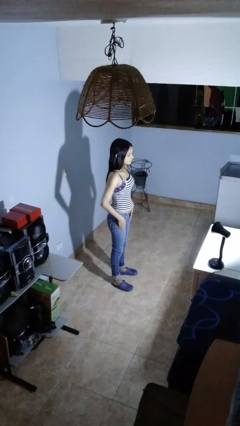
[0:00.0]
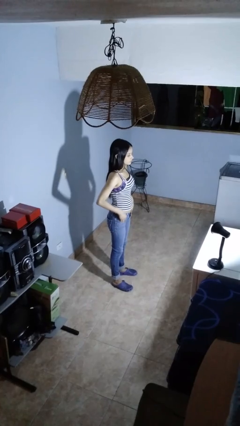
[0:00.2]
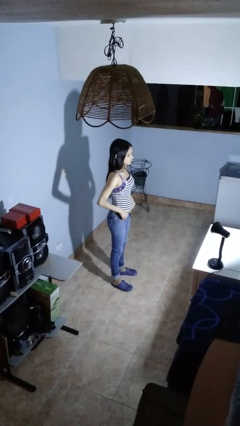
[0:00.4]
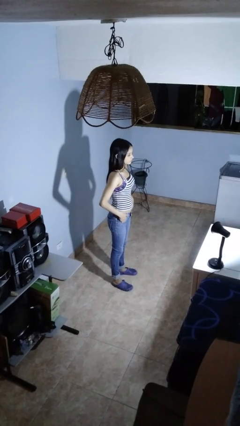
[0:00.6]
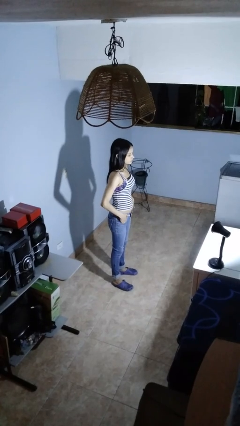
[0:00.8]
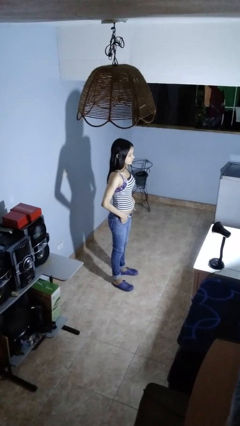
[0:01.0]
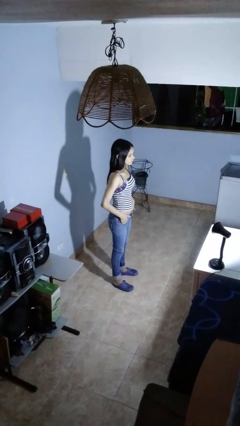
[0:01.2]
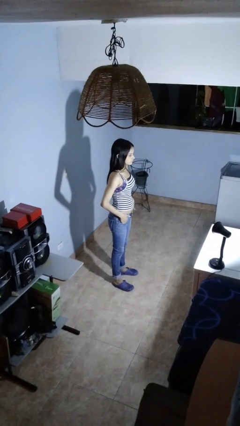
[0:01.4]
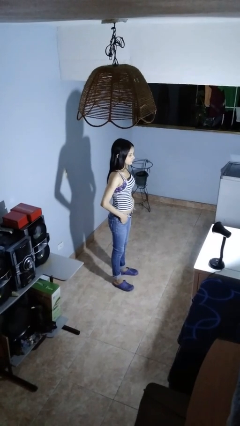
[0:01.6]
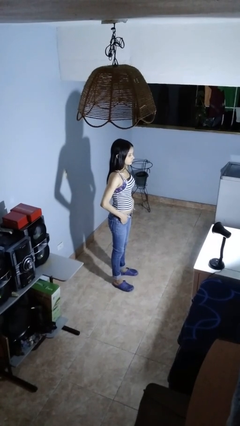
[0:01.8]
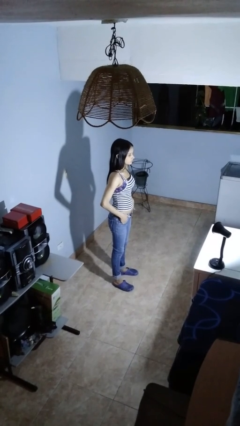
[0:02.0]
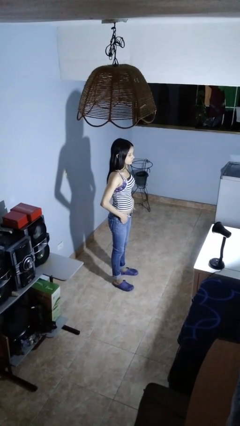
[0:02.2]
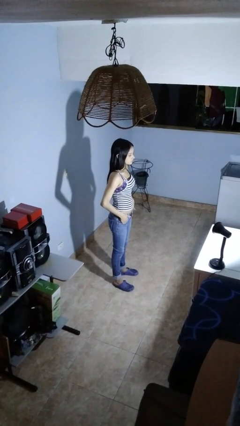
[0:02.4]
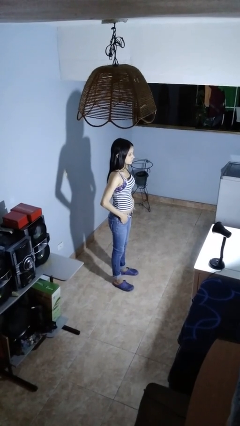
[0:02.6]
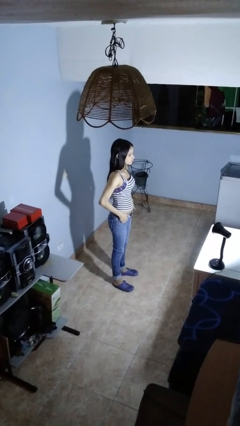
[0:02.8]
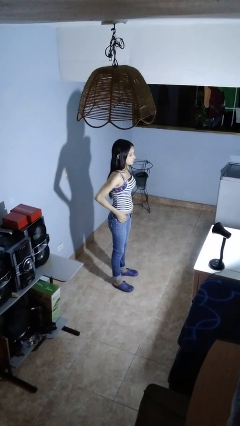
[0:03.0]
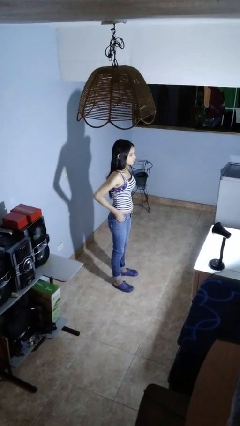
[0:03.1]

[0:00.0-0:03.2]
person puts hands in back pockets

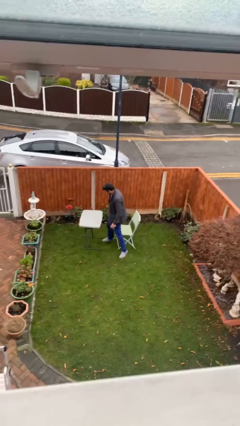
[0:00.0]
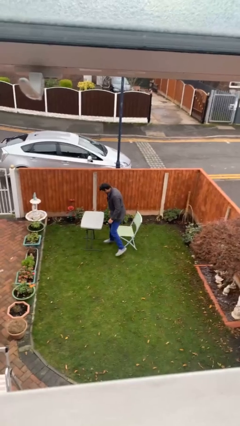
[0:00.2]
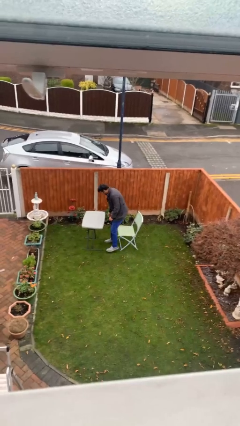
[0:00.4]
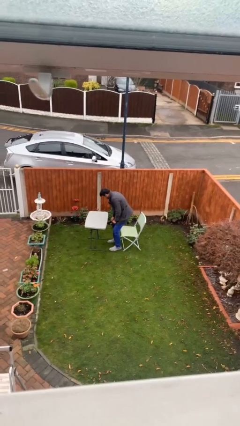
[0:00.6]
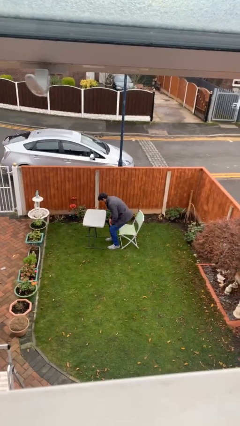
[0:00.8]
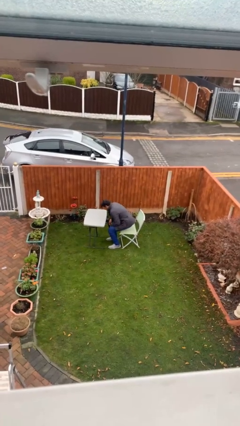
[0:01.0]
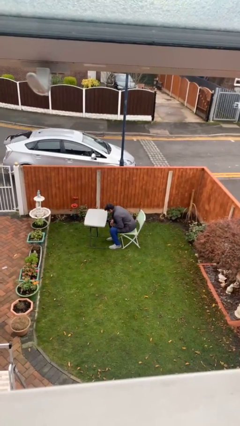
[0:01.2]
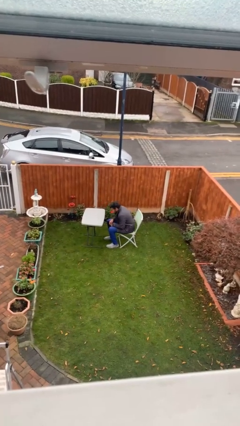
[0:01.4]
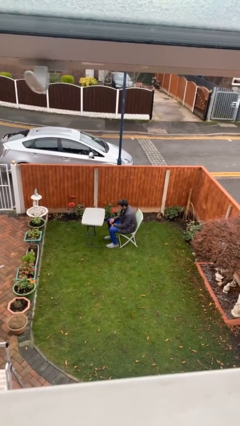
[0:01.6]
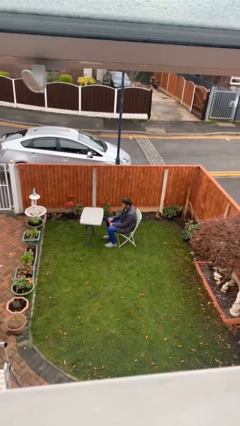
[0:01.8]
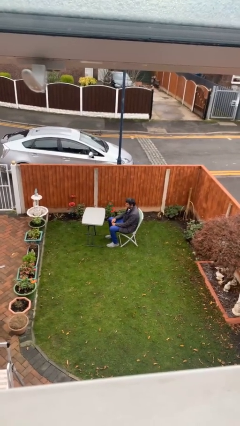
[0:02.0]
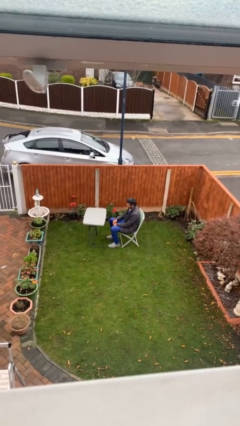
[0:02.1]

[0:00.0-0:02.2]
person sits down

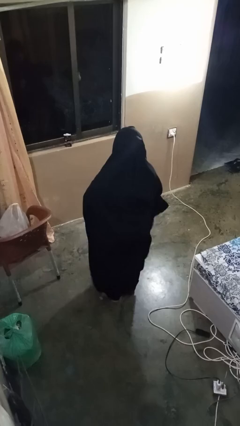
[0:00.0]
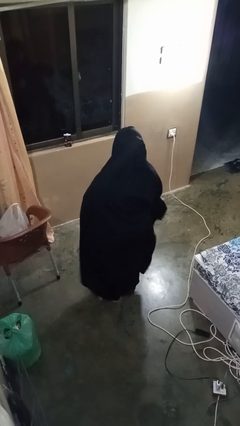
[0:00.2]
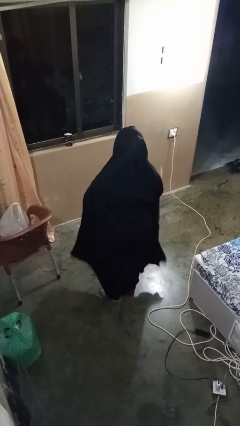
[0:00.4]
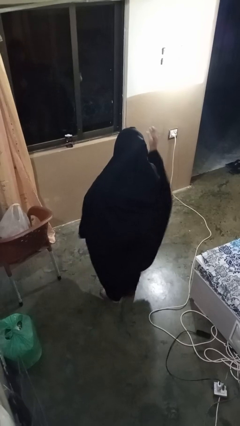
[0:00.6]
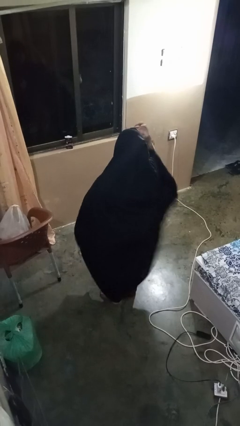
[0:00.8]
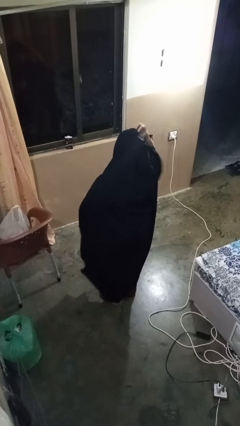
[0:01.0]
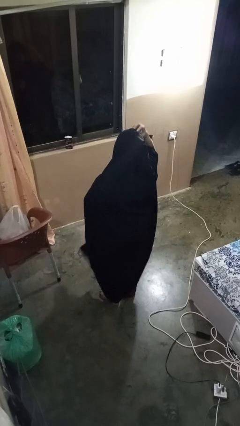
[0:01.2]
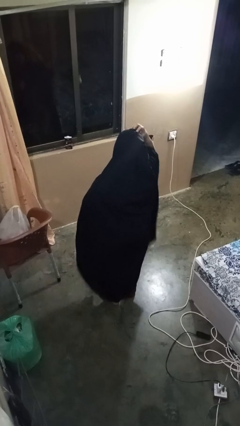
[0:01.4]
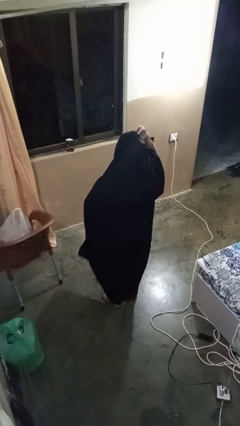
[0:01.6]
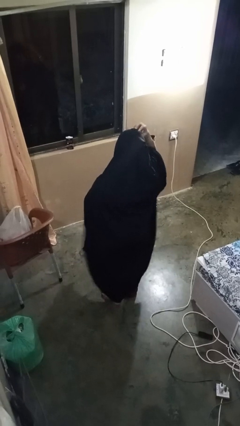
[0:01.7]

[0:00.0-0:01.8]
person scratches face

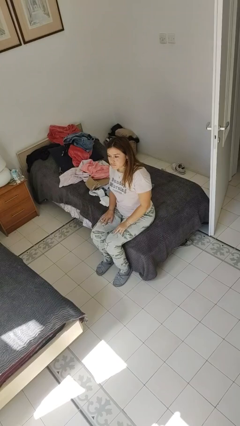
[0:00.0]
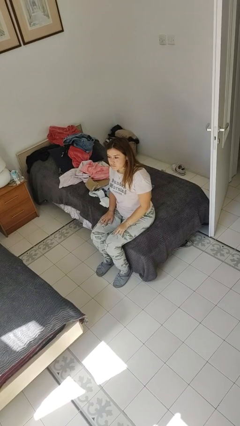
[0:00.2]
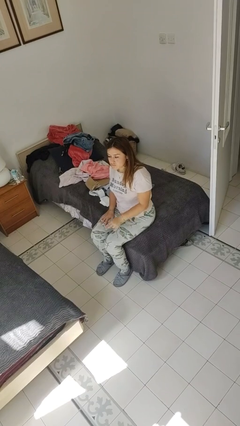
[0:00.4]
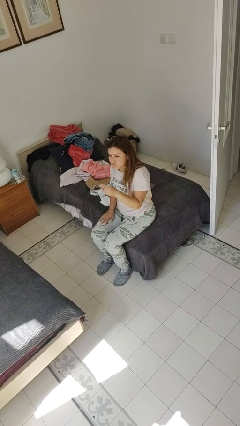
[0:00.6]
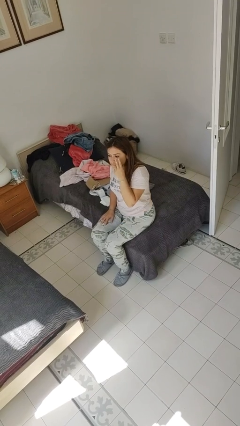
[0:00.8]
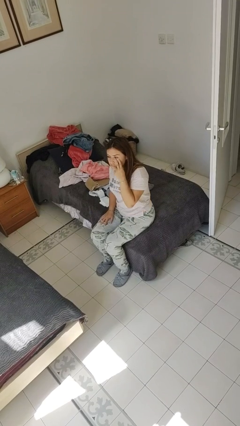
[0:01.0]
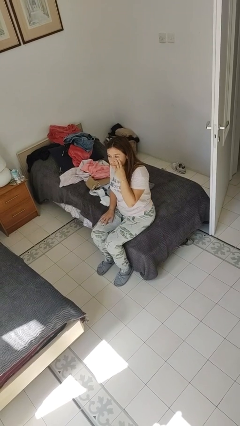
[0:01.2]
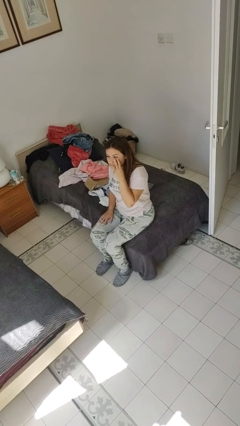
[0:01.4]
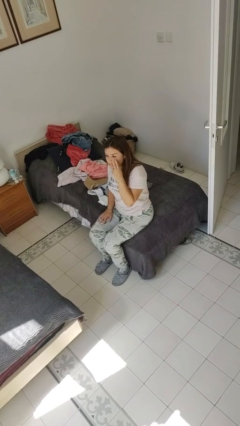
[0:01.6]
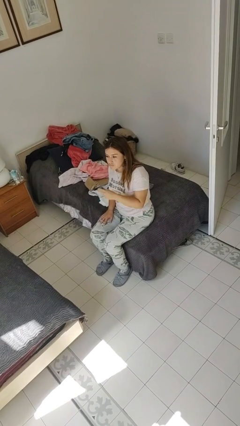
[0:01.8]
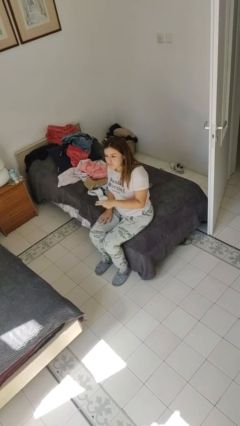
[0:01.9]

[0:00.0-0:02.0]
person gestures watch closely

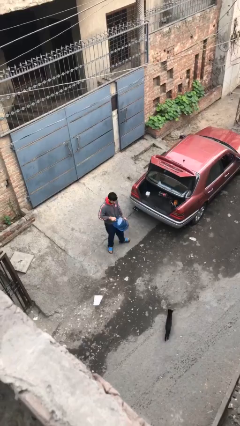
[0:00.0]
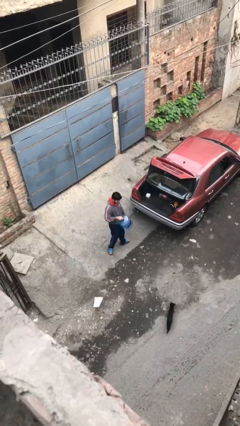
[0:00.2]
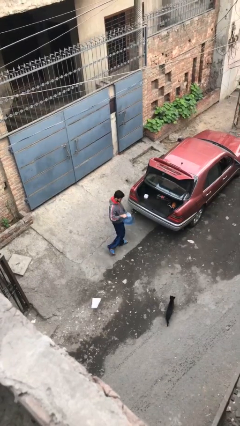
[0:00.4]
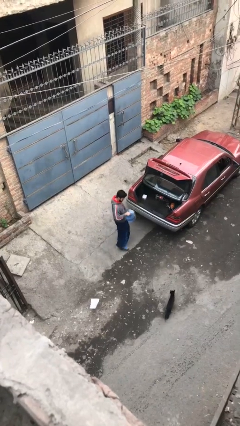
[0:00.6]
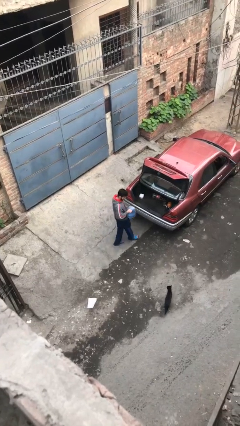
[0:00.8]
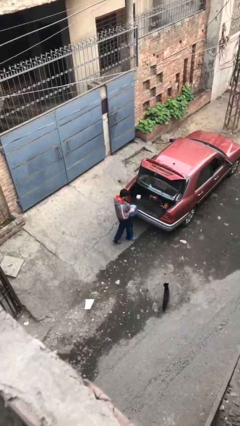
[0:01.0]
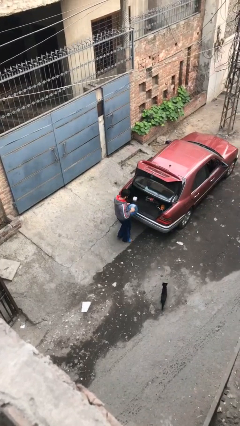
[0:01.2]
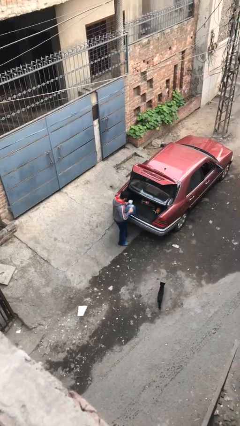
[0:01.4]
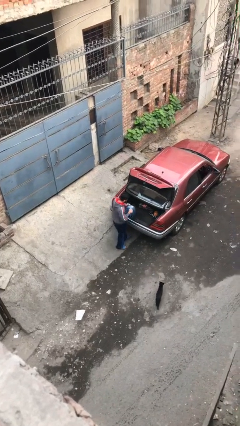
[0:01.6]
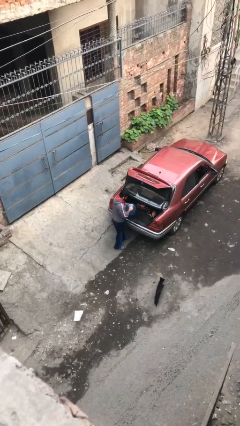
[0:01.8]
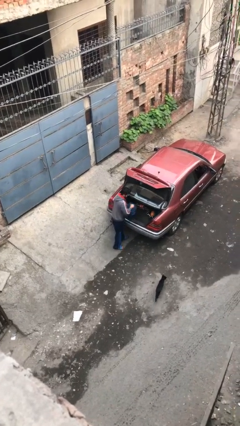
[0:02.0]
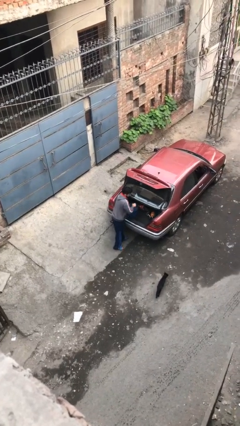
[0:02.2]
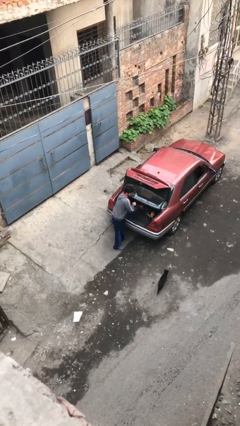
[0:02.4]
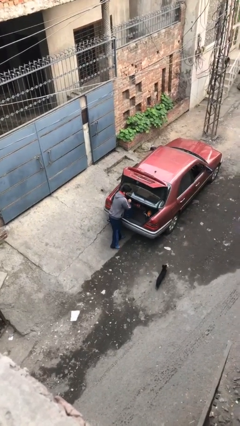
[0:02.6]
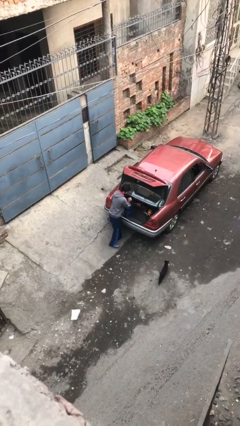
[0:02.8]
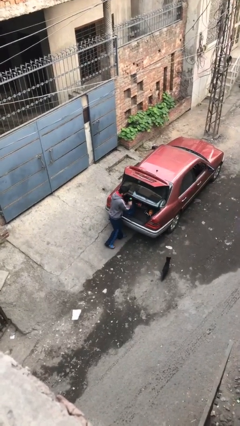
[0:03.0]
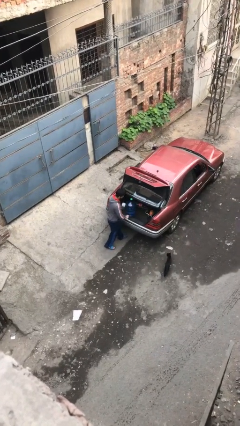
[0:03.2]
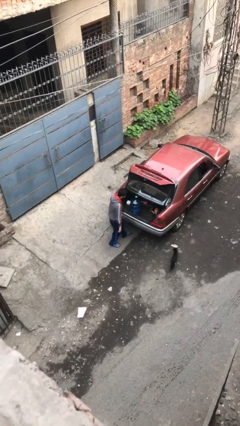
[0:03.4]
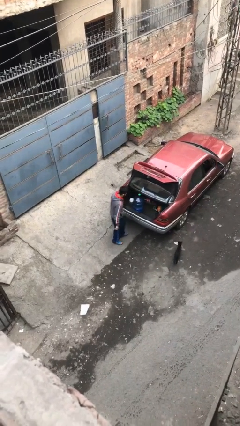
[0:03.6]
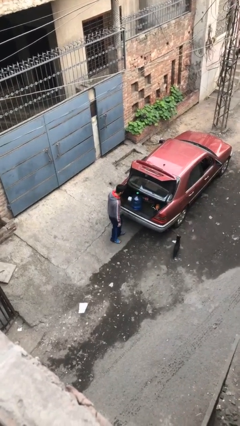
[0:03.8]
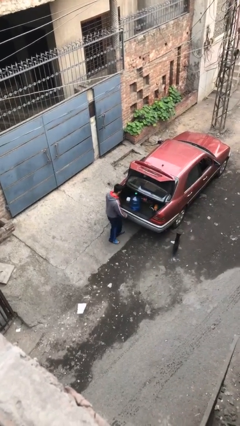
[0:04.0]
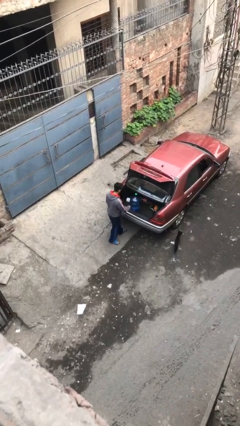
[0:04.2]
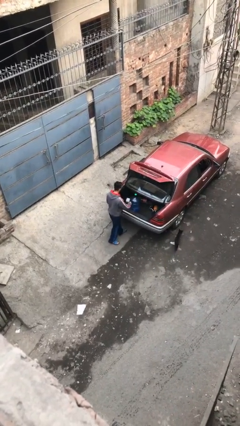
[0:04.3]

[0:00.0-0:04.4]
person loads car

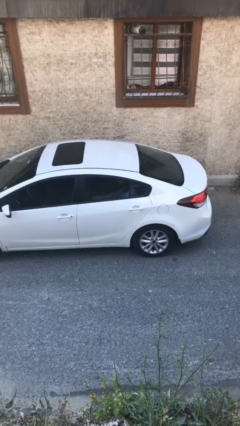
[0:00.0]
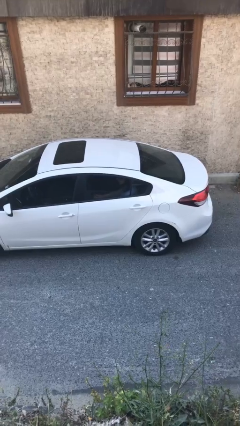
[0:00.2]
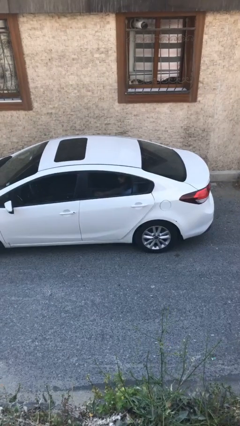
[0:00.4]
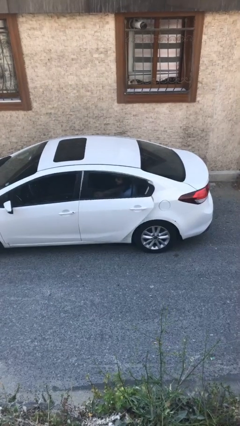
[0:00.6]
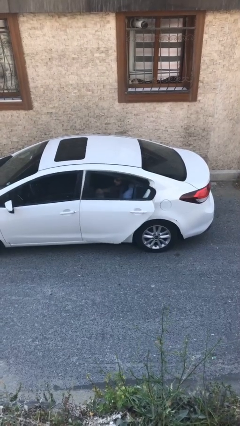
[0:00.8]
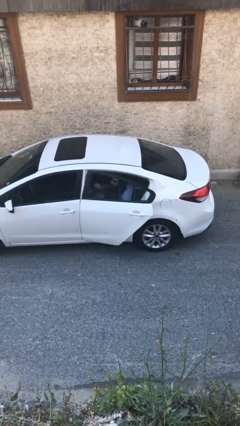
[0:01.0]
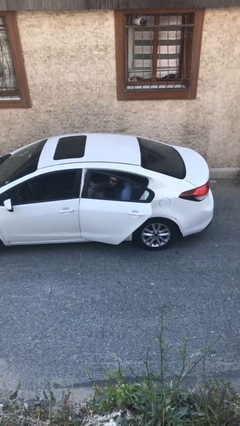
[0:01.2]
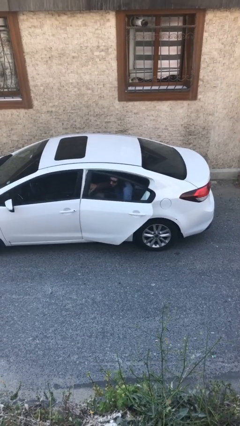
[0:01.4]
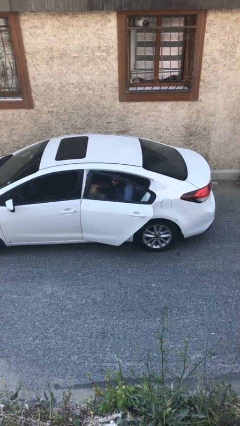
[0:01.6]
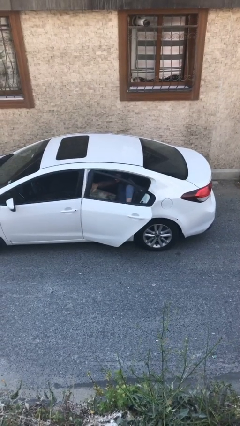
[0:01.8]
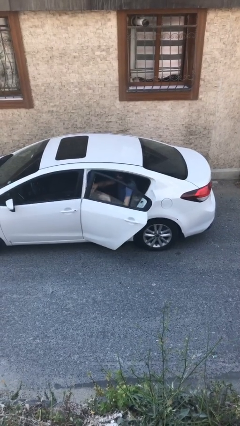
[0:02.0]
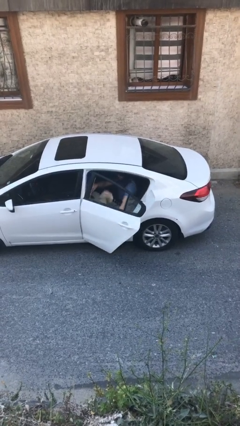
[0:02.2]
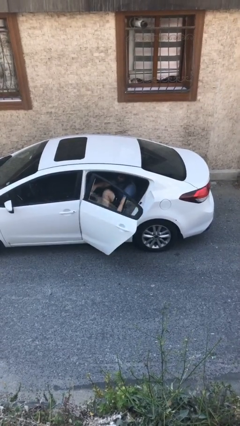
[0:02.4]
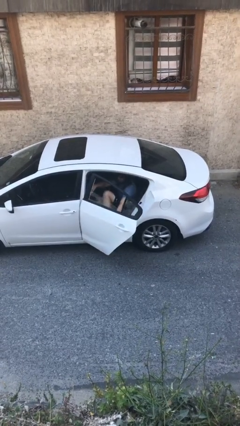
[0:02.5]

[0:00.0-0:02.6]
person opens car door

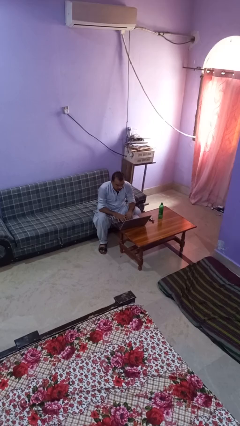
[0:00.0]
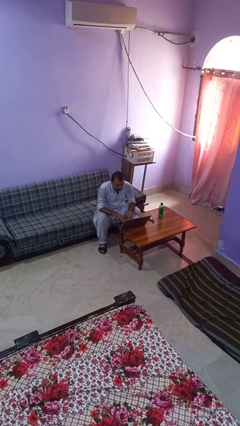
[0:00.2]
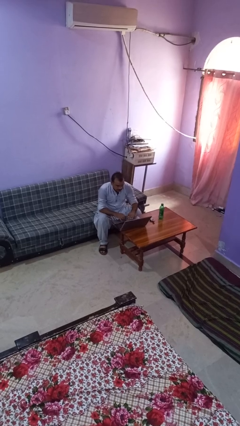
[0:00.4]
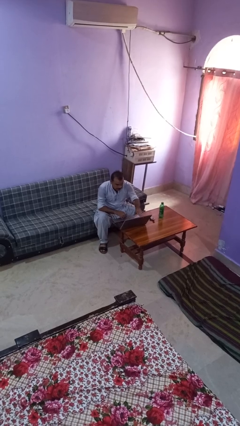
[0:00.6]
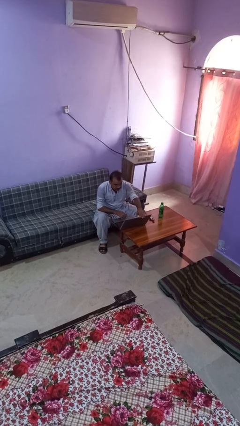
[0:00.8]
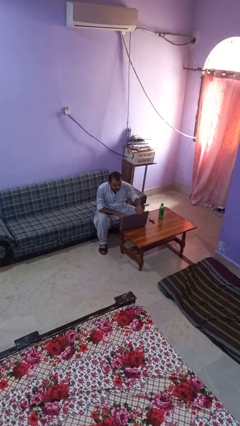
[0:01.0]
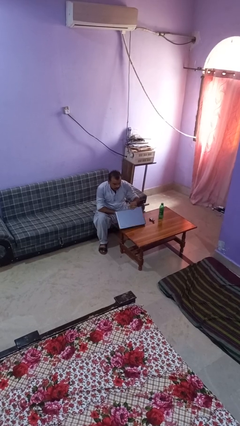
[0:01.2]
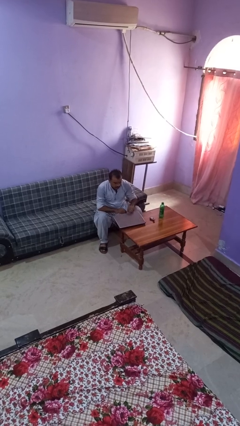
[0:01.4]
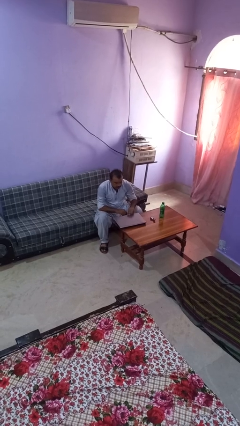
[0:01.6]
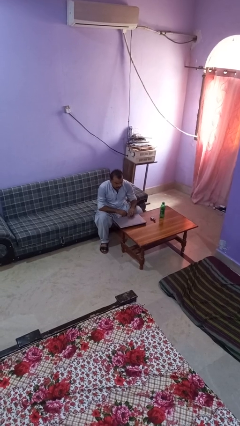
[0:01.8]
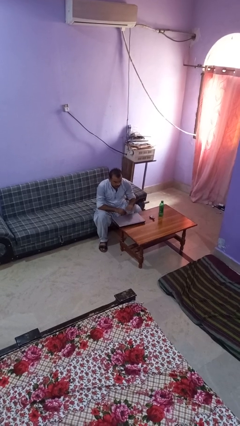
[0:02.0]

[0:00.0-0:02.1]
person closes laptop
